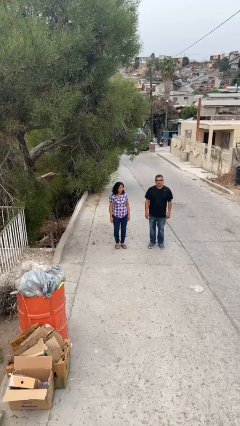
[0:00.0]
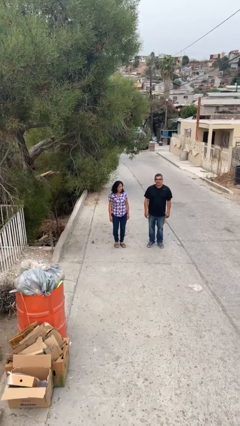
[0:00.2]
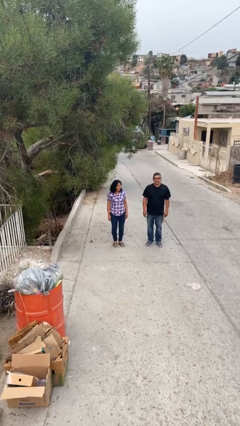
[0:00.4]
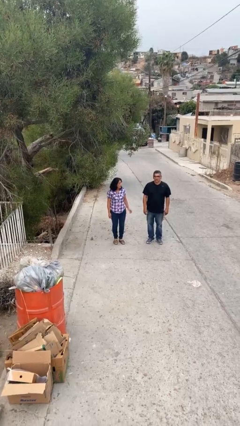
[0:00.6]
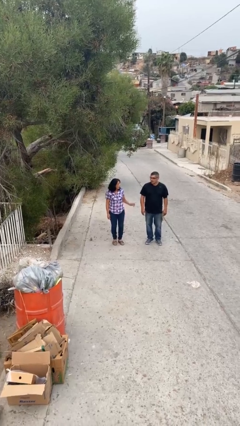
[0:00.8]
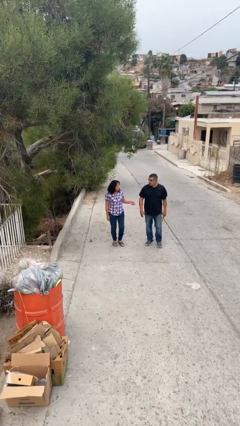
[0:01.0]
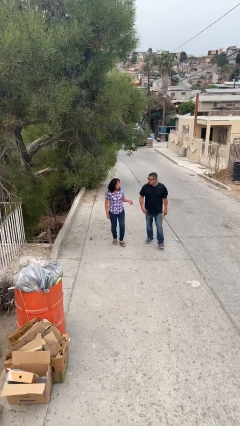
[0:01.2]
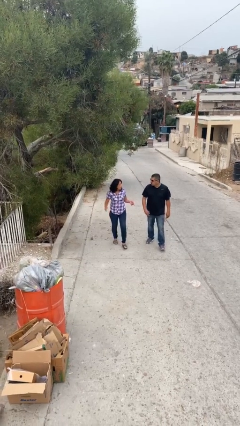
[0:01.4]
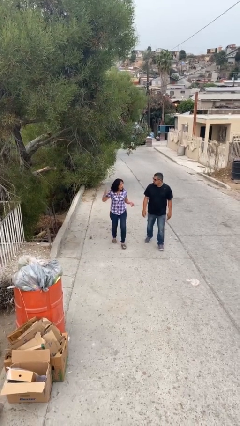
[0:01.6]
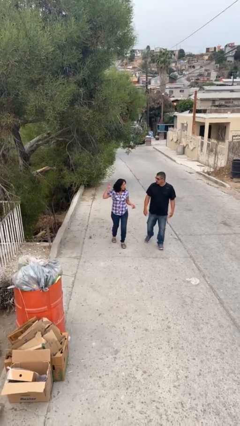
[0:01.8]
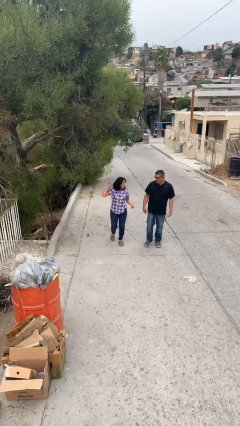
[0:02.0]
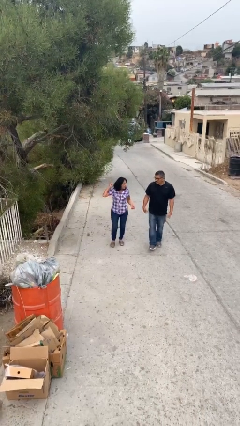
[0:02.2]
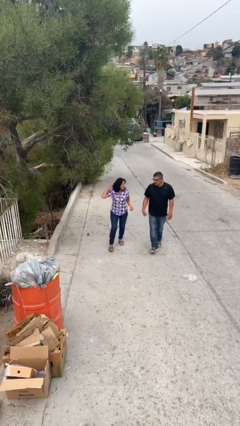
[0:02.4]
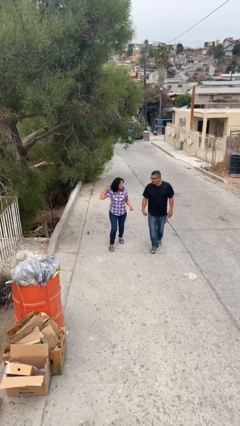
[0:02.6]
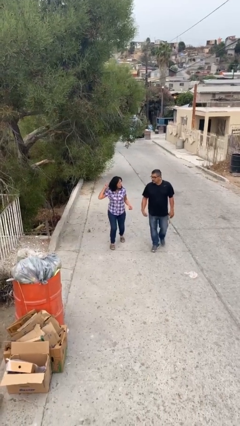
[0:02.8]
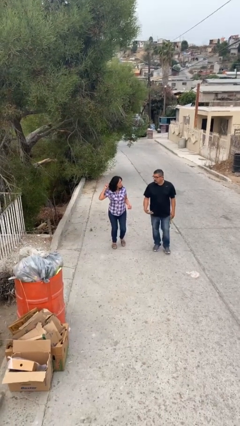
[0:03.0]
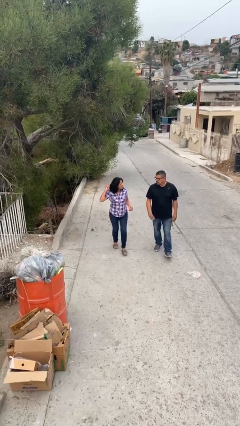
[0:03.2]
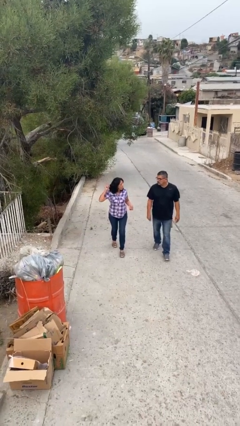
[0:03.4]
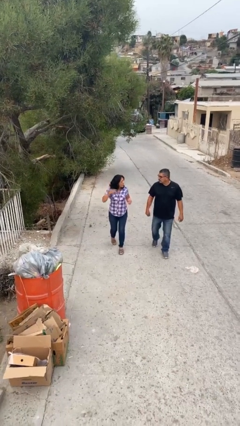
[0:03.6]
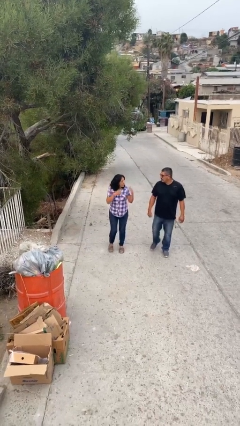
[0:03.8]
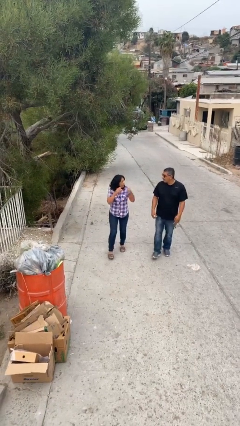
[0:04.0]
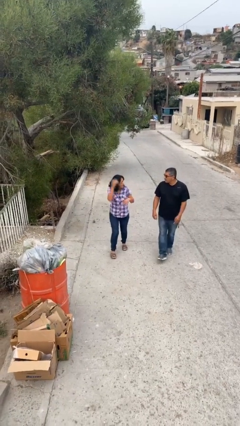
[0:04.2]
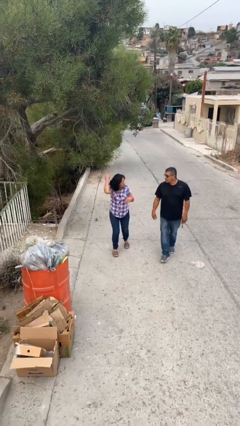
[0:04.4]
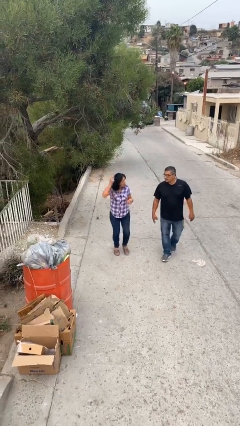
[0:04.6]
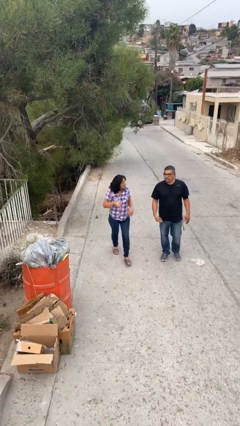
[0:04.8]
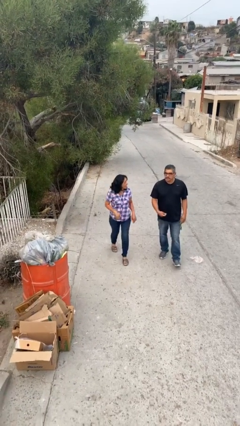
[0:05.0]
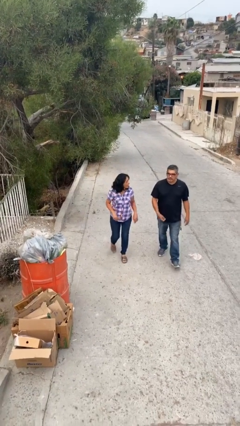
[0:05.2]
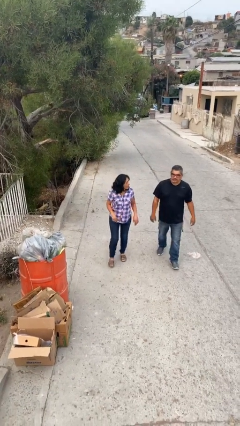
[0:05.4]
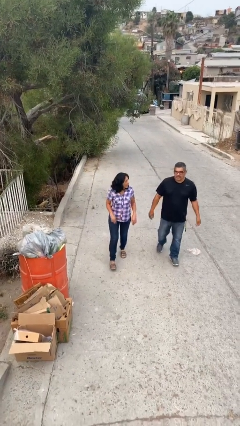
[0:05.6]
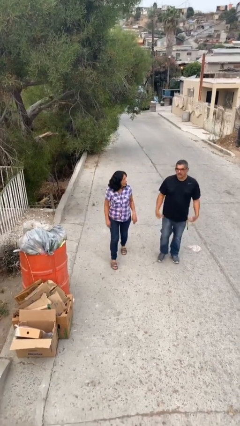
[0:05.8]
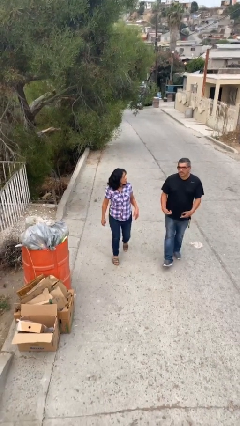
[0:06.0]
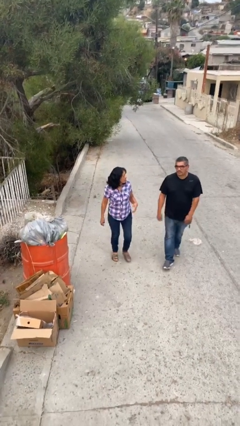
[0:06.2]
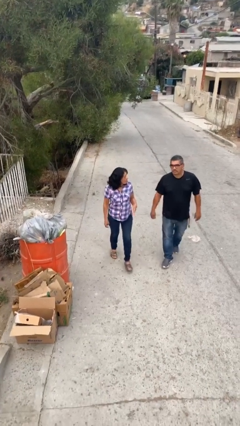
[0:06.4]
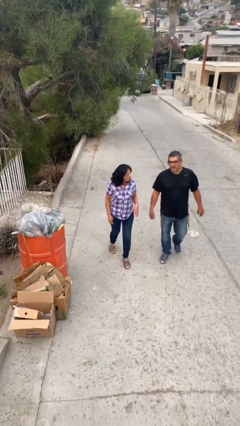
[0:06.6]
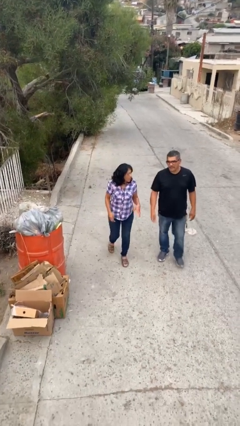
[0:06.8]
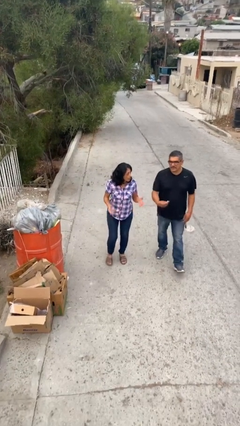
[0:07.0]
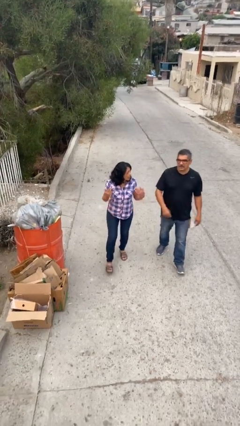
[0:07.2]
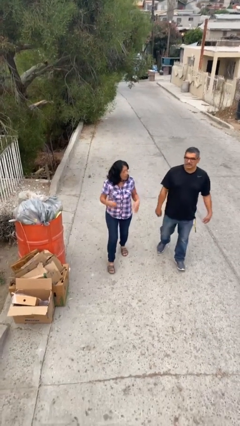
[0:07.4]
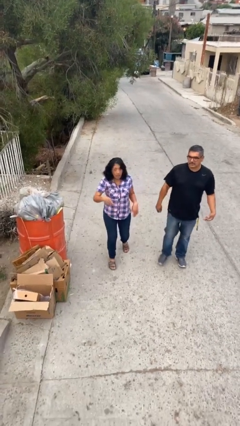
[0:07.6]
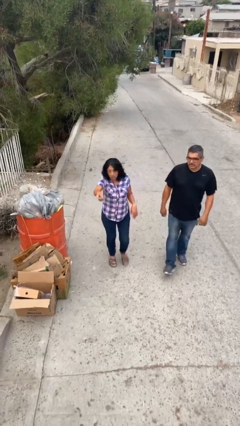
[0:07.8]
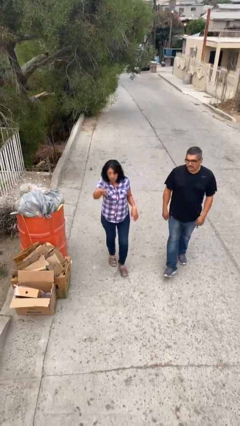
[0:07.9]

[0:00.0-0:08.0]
person talks to person

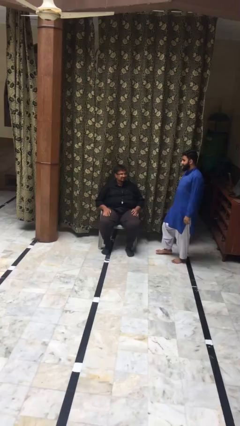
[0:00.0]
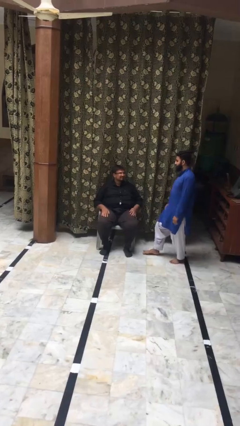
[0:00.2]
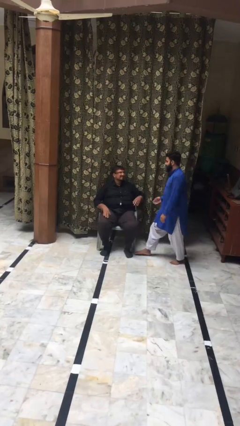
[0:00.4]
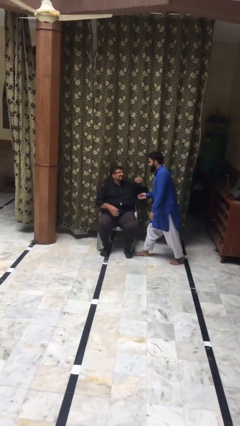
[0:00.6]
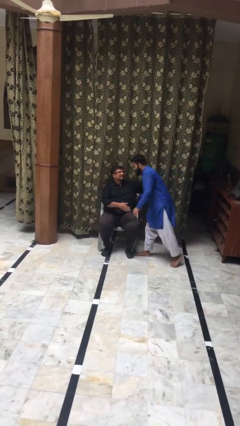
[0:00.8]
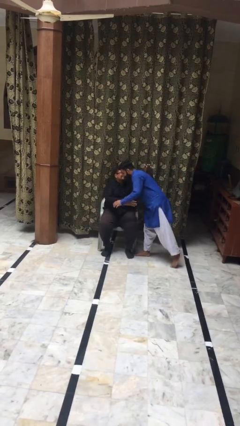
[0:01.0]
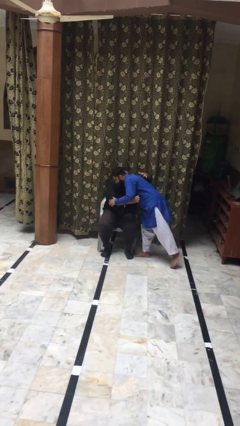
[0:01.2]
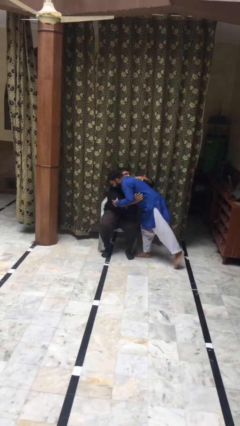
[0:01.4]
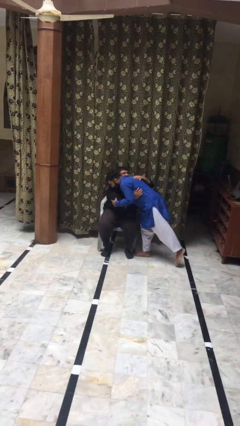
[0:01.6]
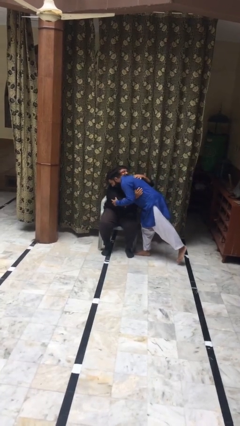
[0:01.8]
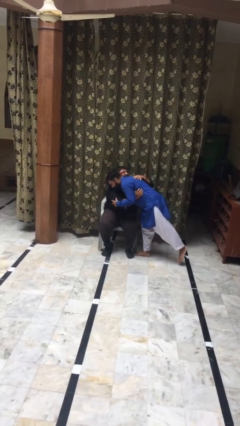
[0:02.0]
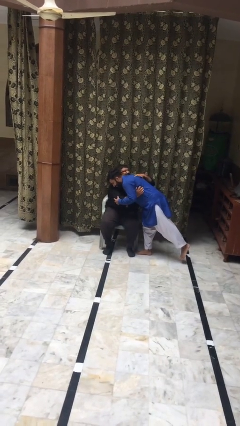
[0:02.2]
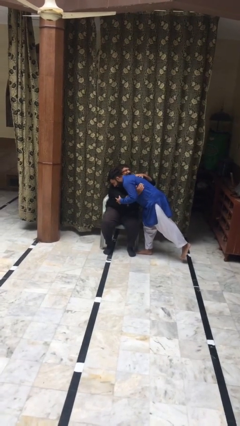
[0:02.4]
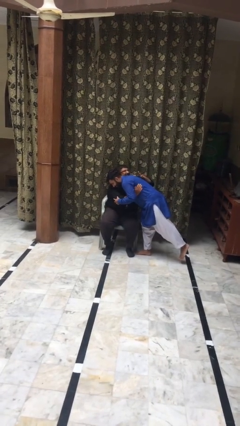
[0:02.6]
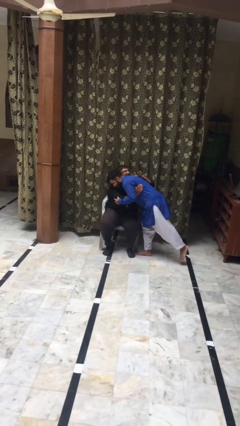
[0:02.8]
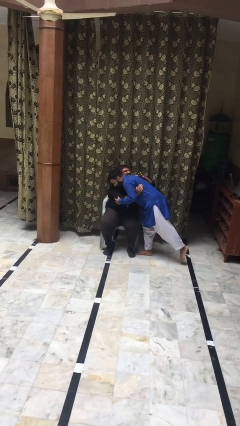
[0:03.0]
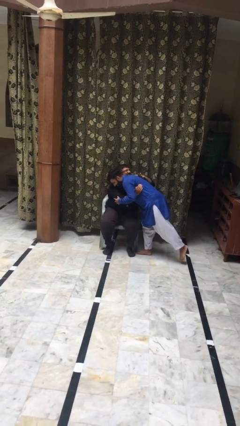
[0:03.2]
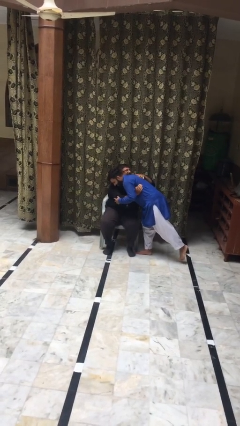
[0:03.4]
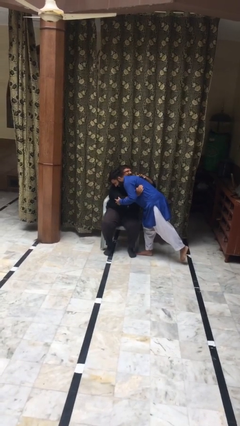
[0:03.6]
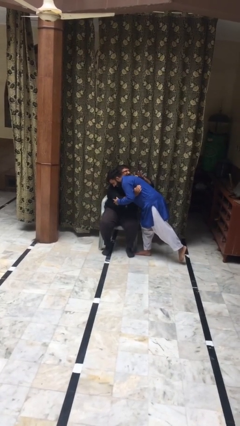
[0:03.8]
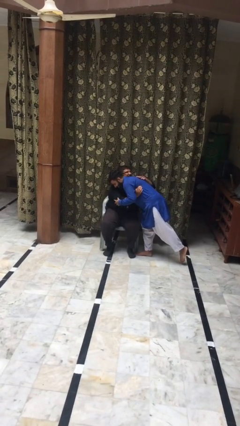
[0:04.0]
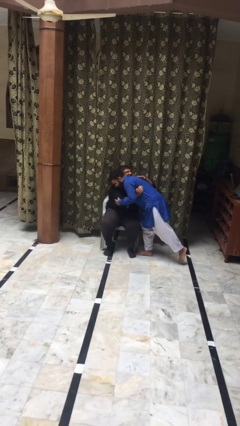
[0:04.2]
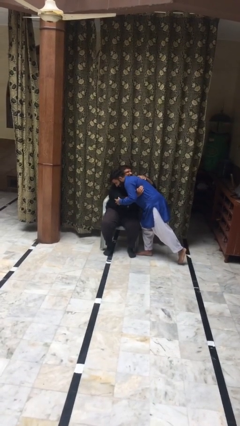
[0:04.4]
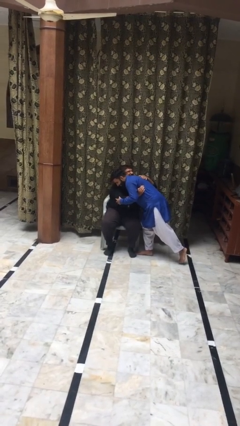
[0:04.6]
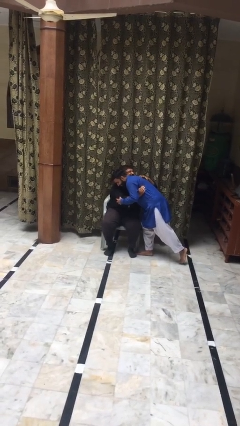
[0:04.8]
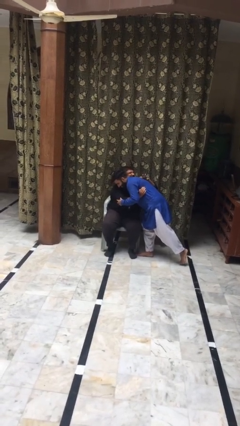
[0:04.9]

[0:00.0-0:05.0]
person embraces person

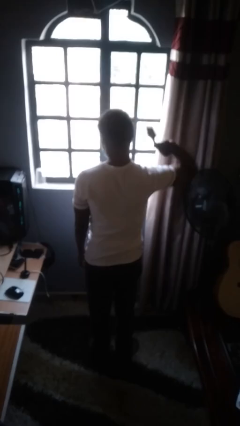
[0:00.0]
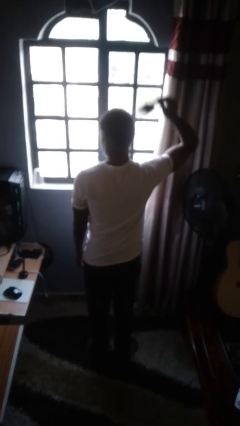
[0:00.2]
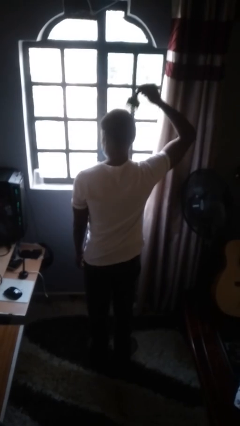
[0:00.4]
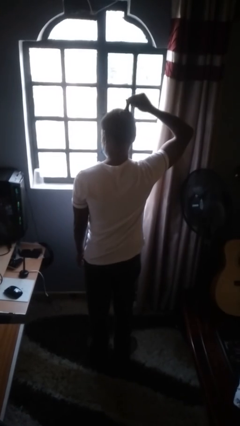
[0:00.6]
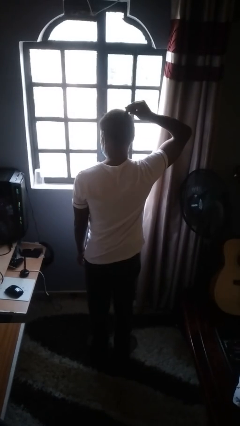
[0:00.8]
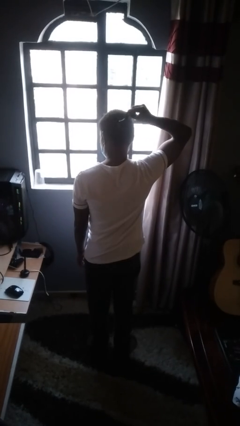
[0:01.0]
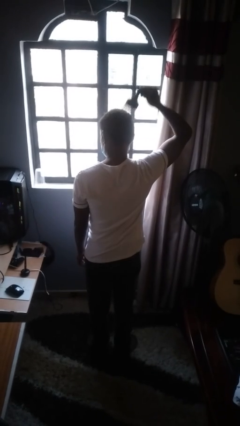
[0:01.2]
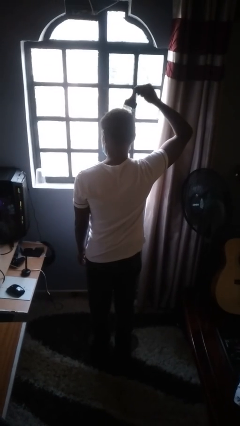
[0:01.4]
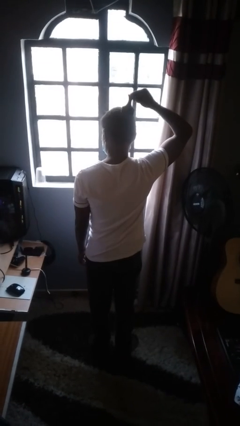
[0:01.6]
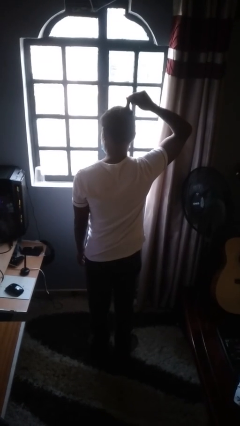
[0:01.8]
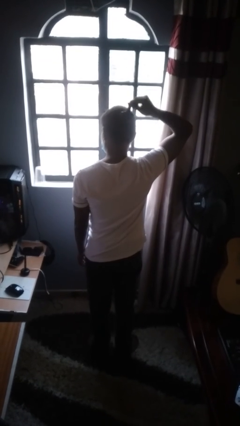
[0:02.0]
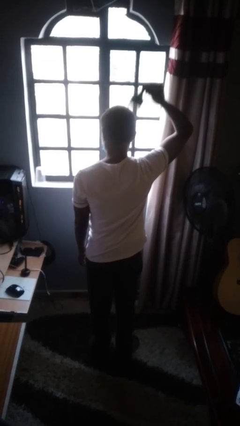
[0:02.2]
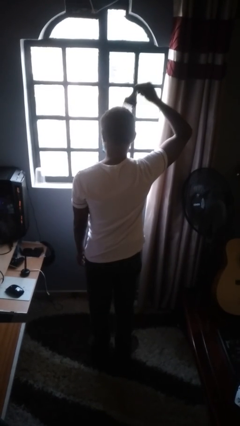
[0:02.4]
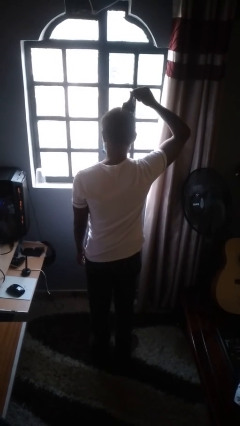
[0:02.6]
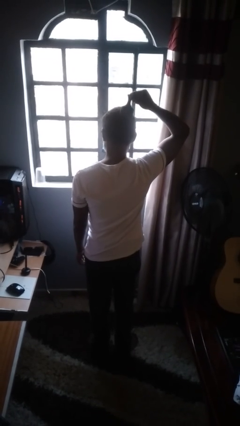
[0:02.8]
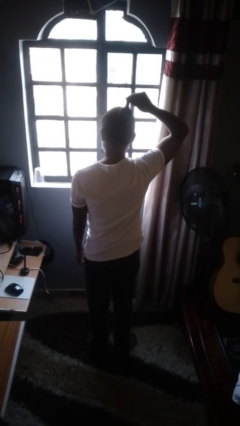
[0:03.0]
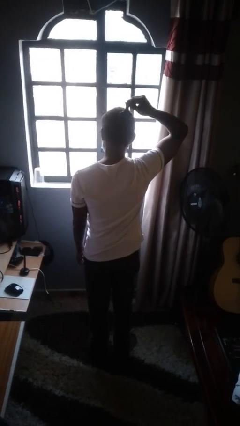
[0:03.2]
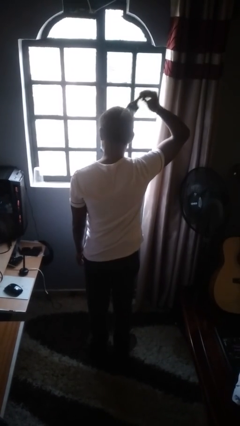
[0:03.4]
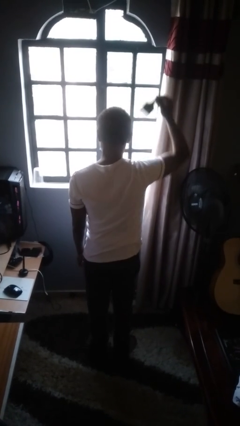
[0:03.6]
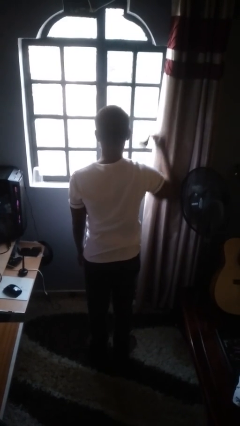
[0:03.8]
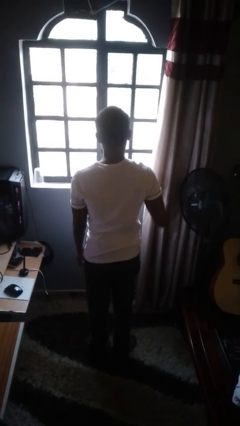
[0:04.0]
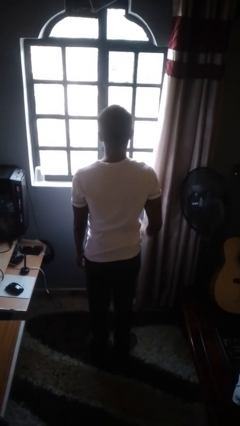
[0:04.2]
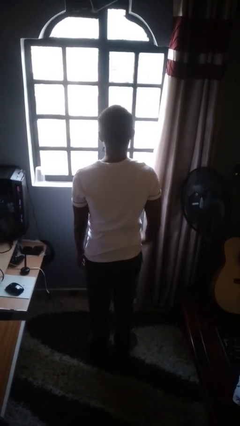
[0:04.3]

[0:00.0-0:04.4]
person brushes hair

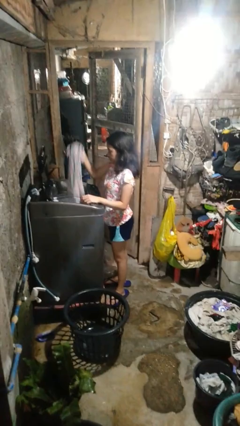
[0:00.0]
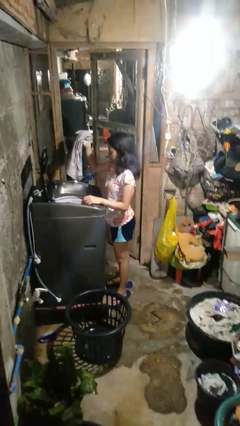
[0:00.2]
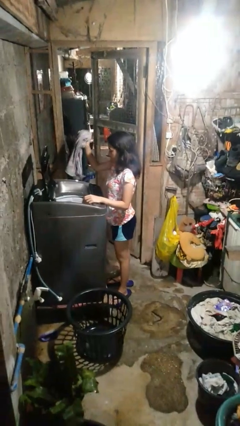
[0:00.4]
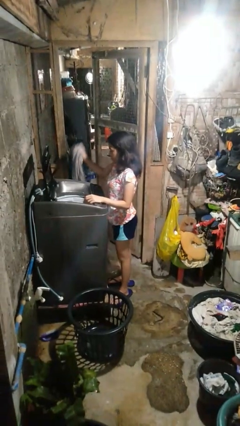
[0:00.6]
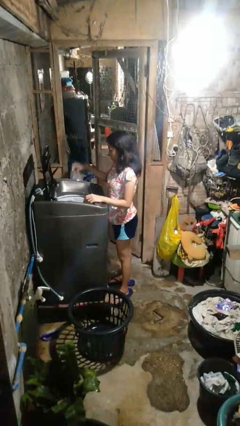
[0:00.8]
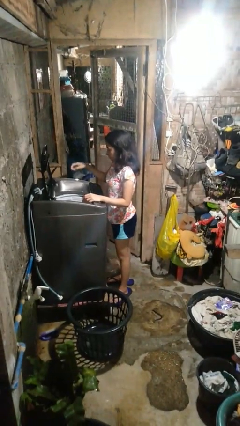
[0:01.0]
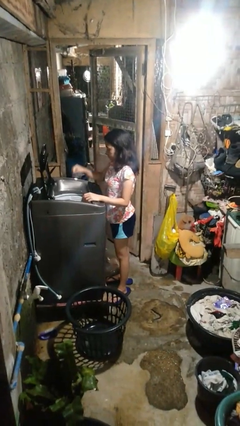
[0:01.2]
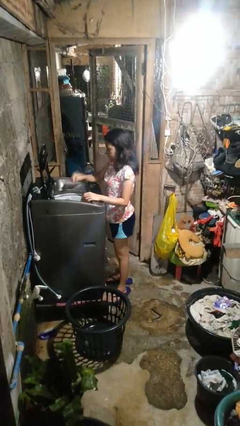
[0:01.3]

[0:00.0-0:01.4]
person loads dryer
